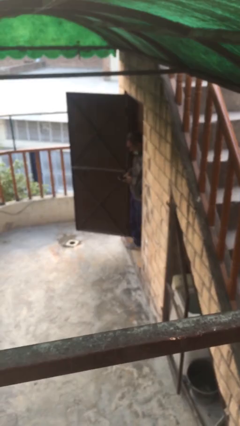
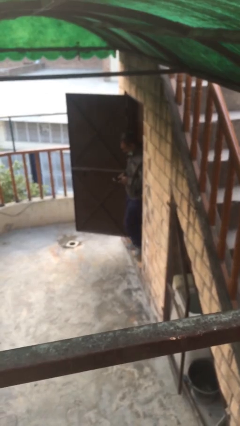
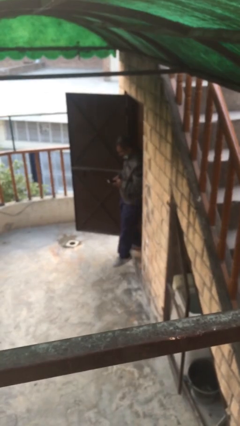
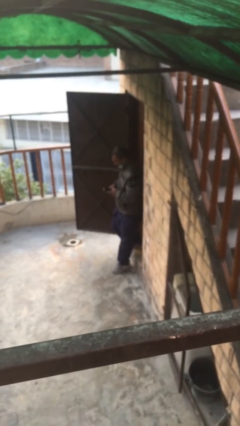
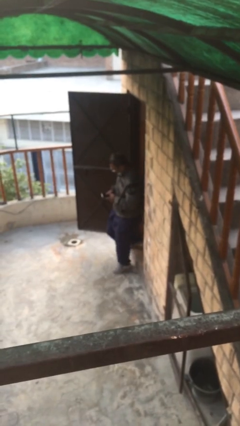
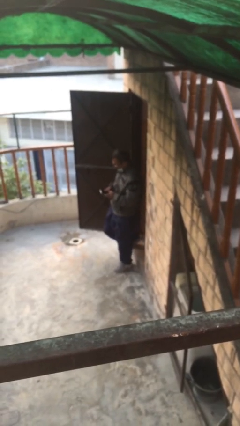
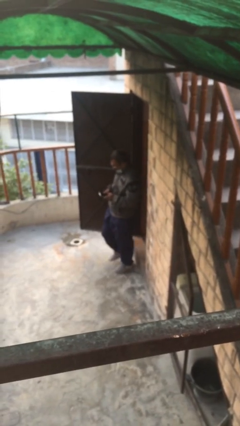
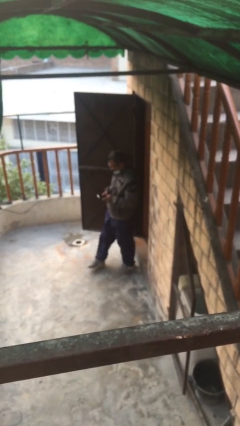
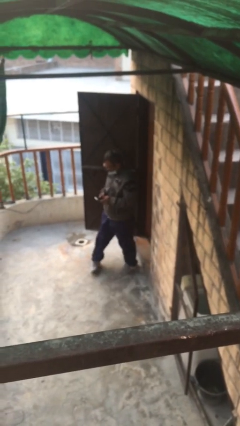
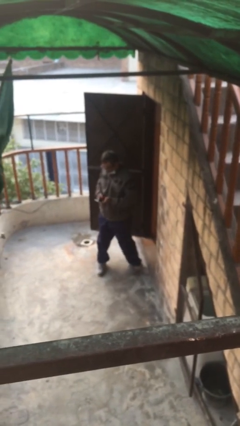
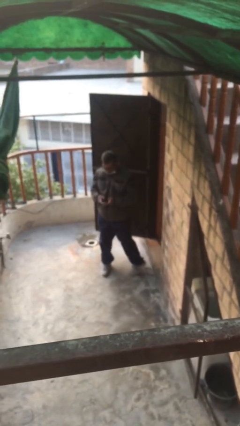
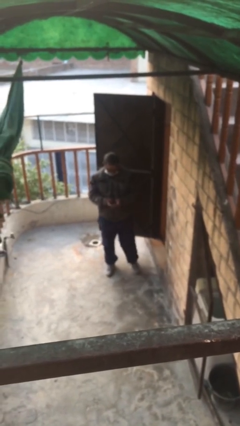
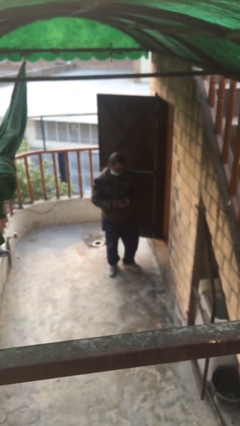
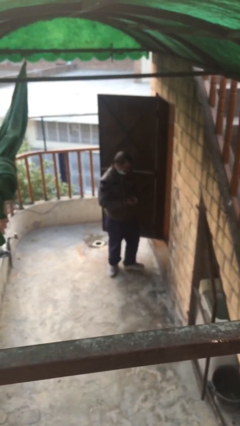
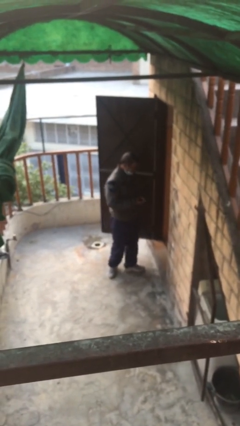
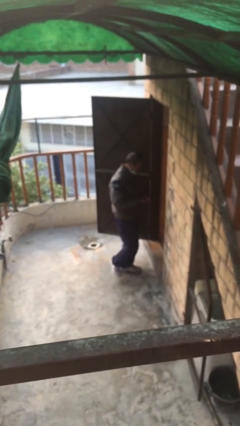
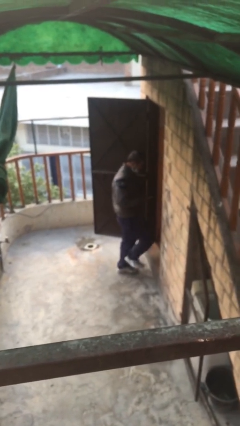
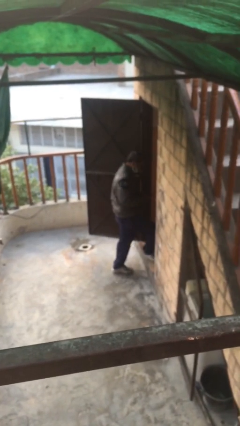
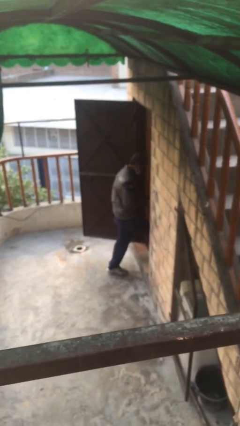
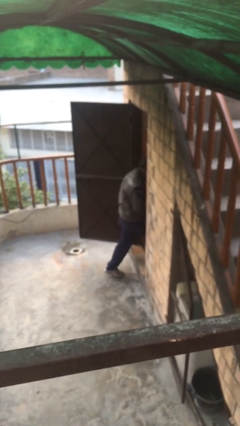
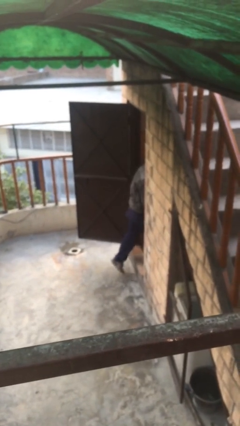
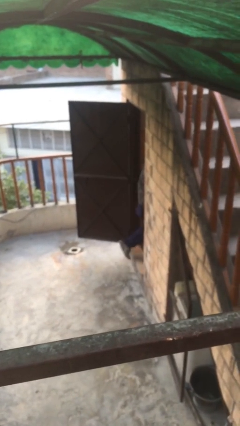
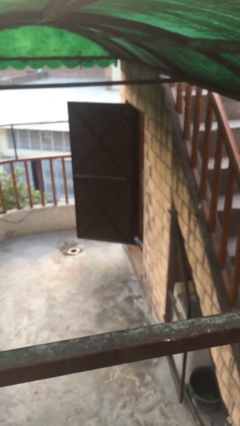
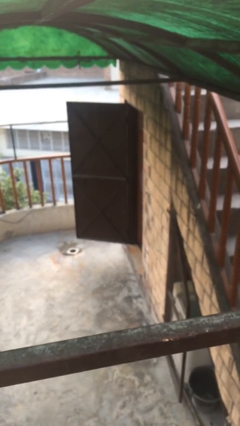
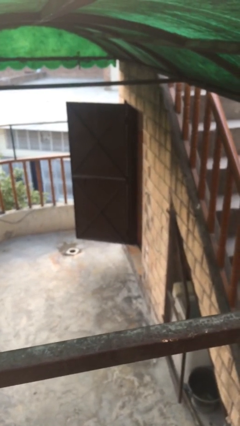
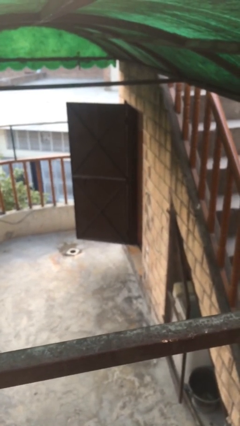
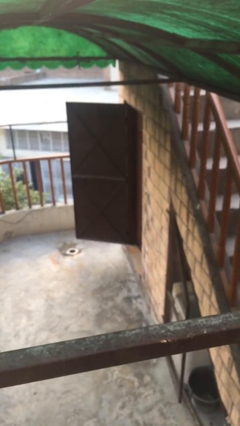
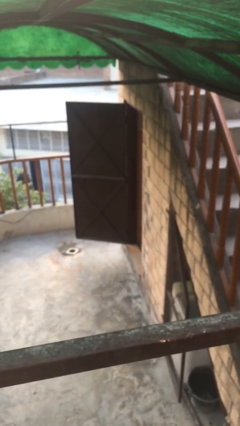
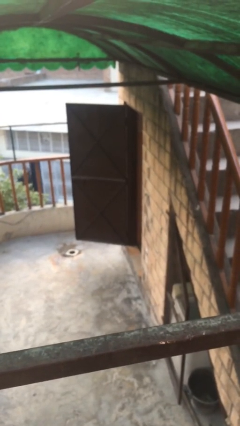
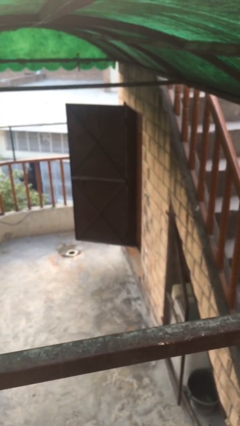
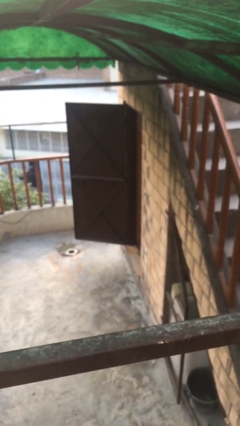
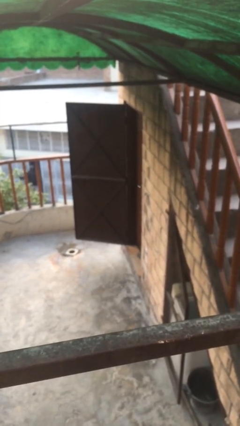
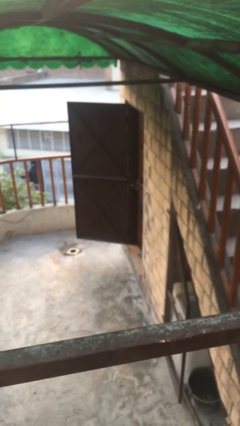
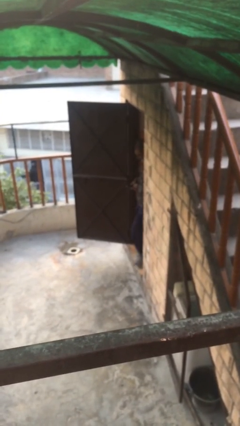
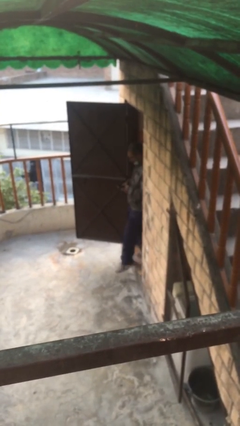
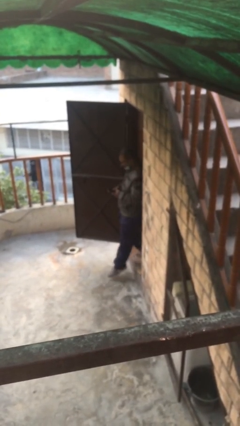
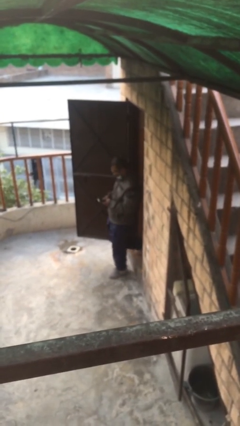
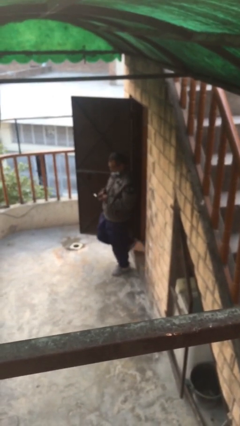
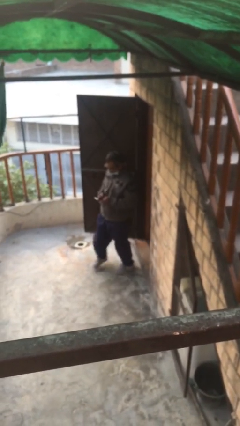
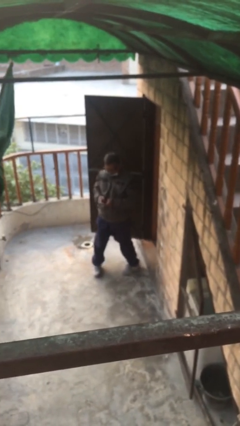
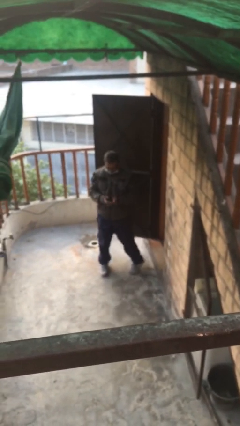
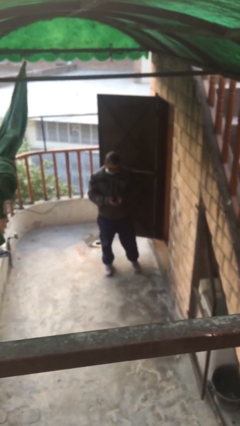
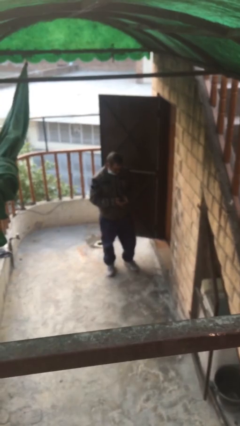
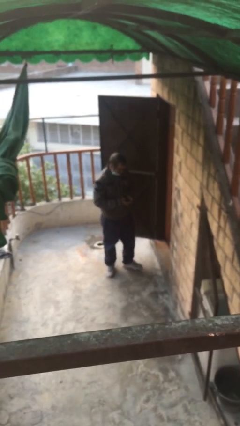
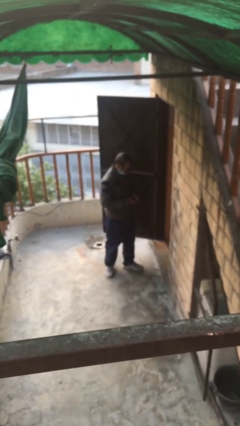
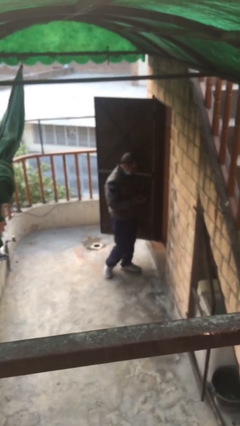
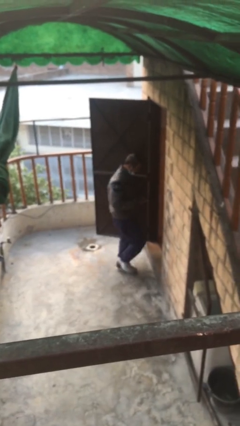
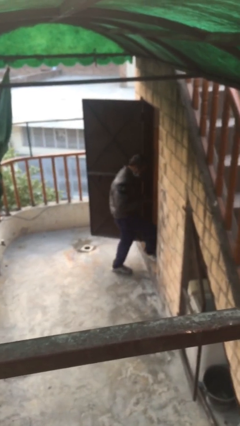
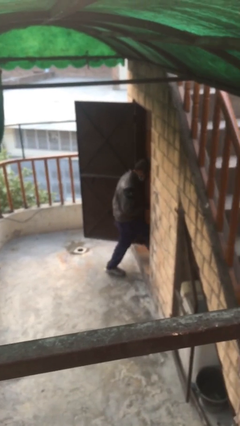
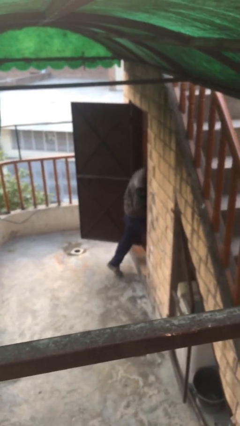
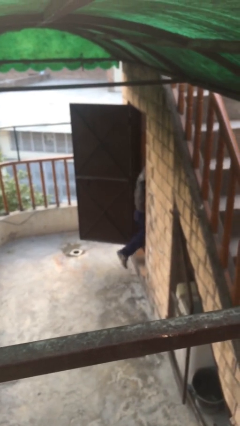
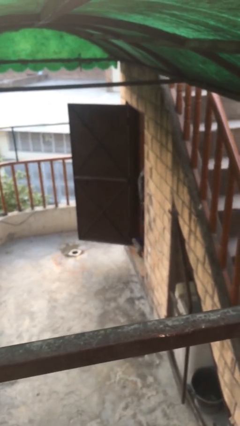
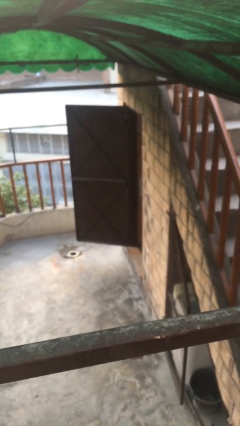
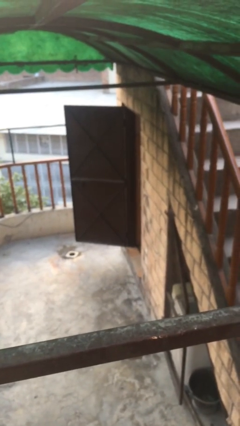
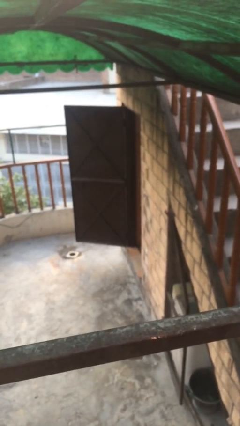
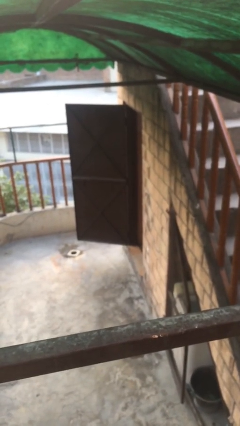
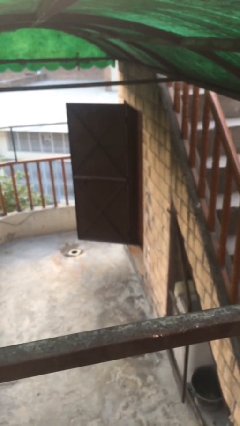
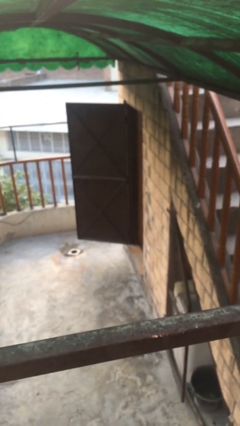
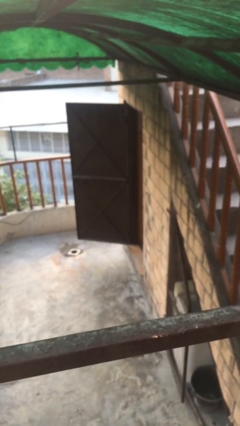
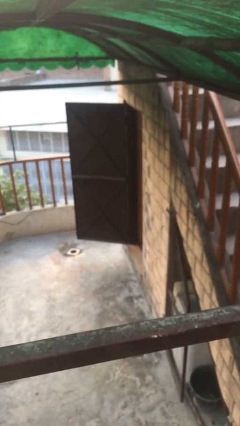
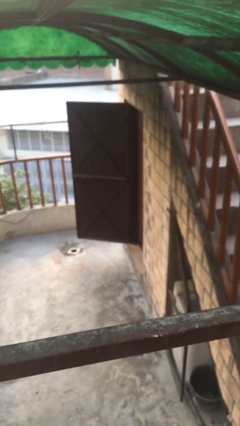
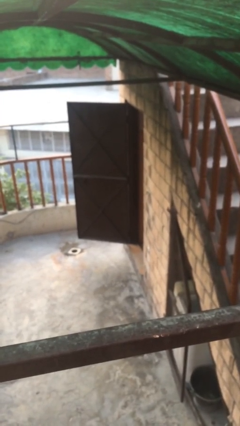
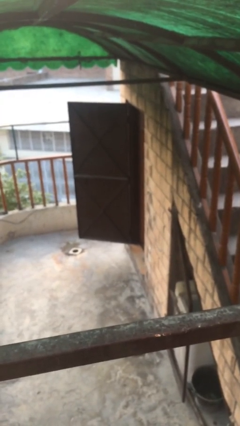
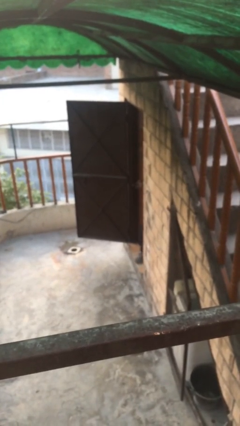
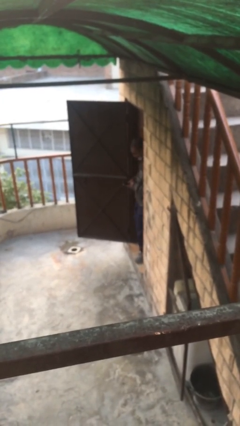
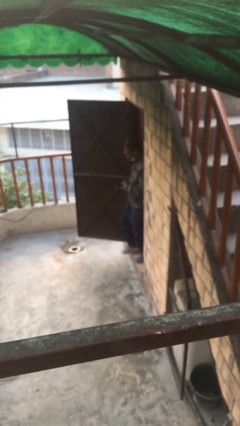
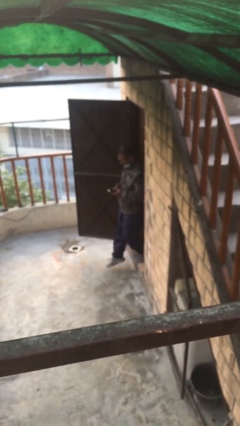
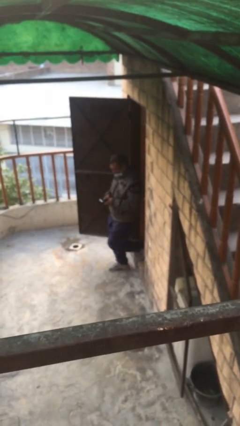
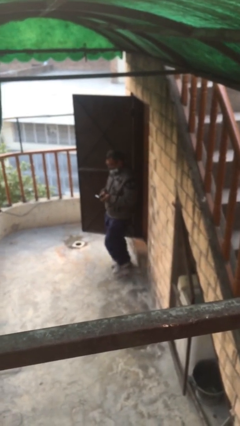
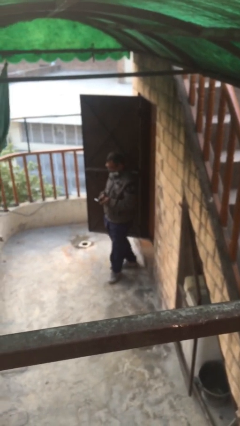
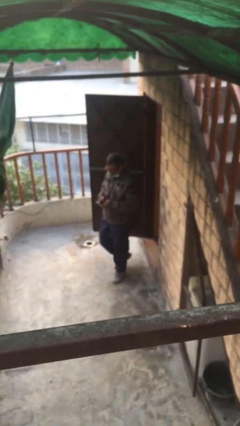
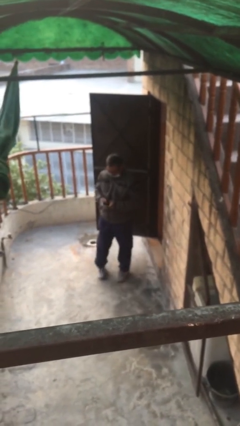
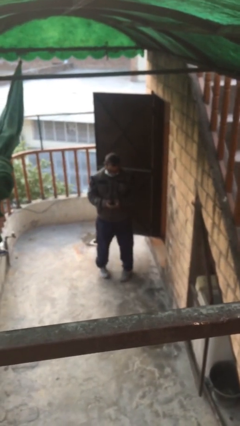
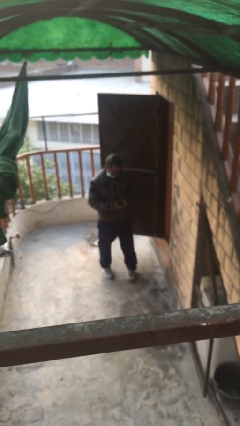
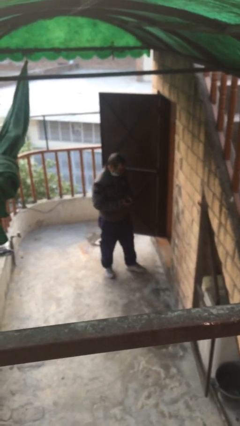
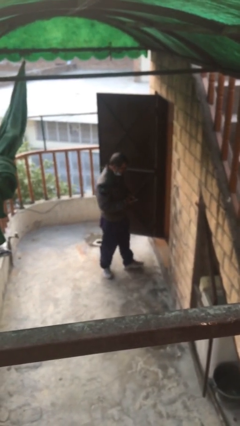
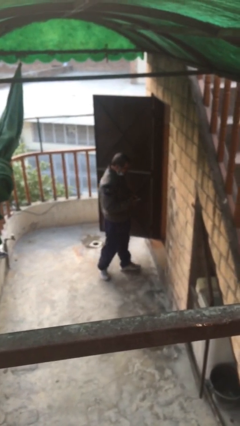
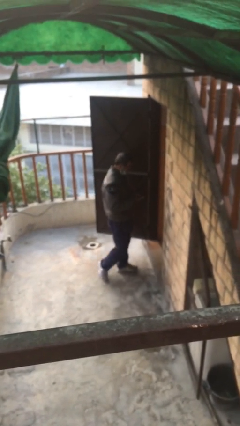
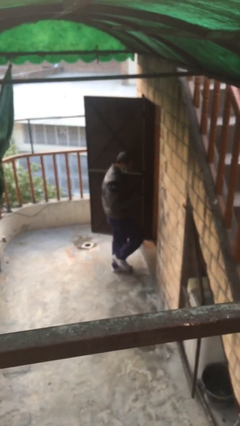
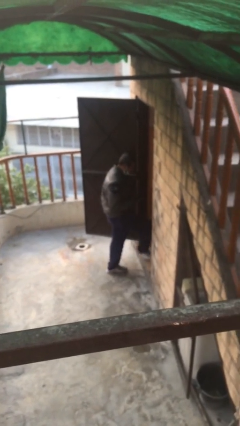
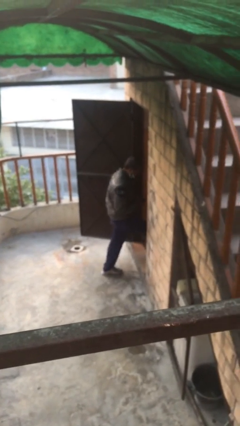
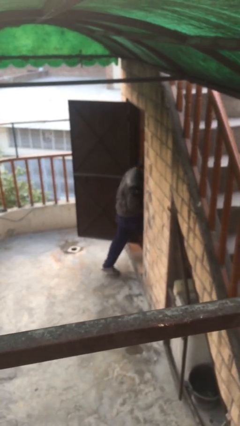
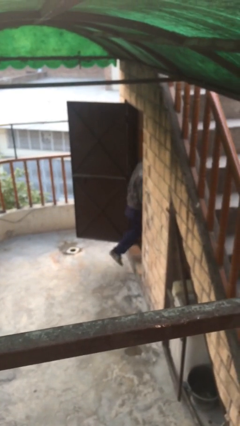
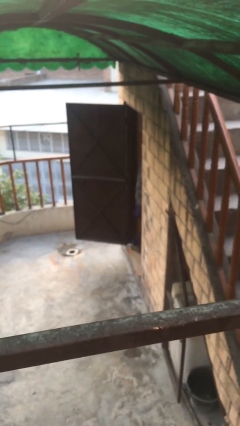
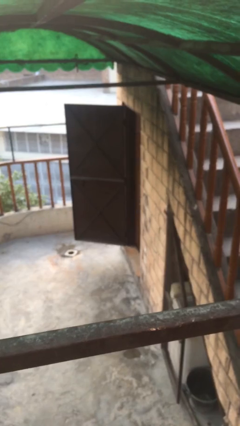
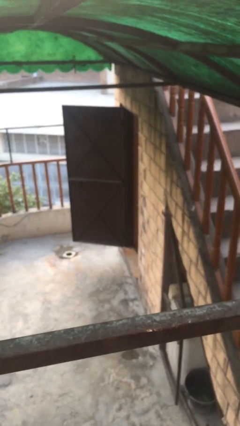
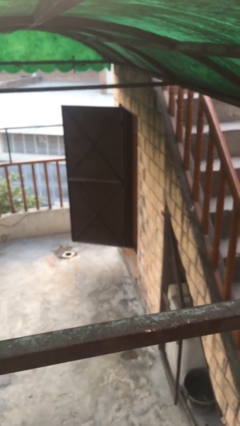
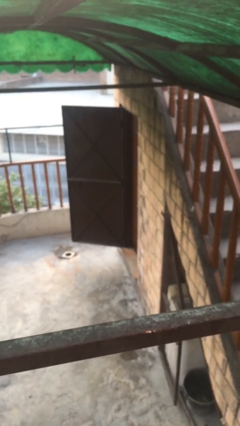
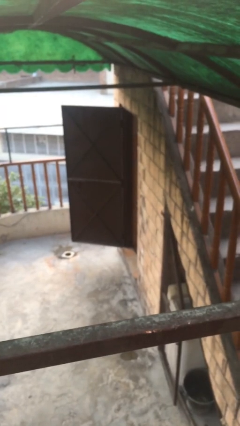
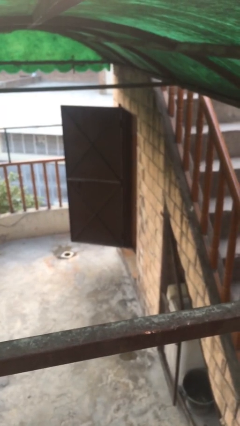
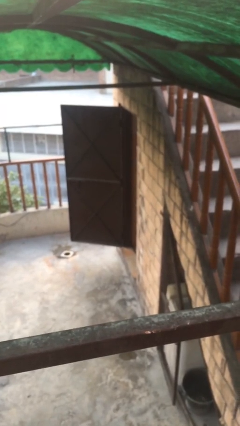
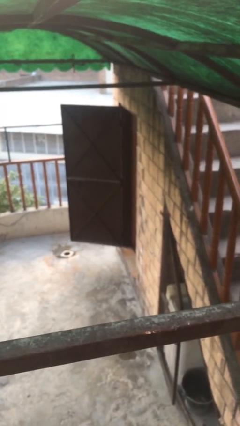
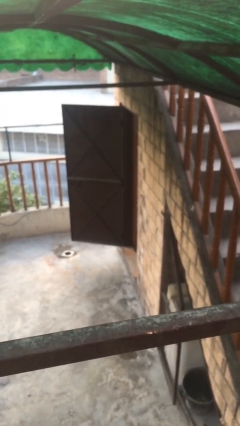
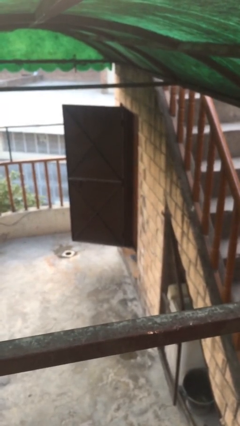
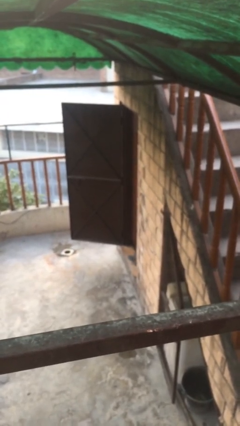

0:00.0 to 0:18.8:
person texts on phone
